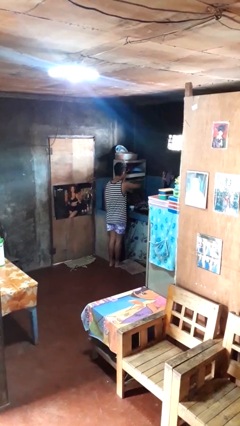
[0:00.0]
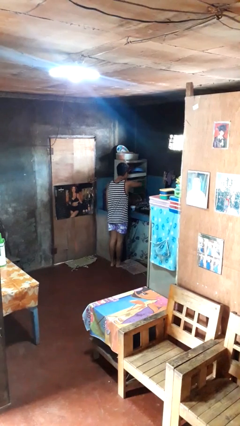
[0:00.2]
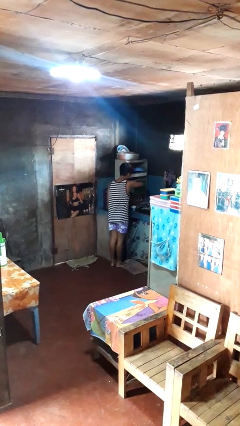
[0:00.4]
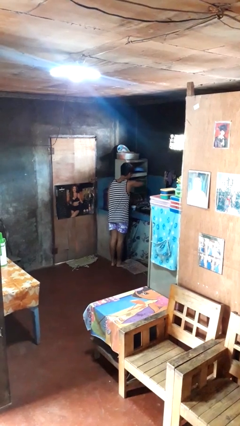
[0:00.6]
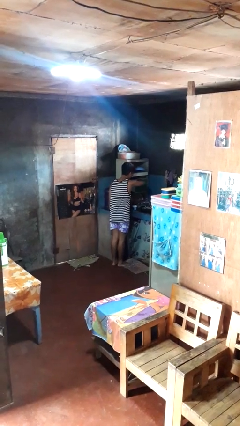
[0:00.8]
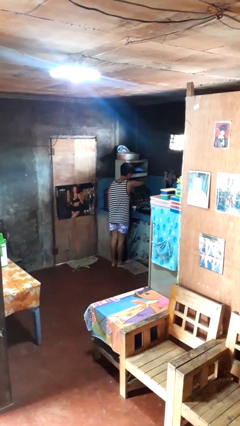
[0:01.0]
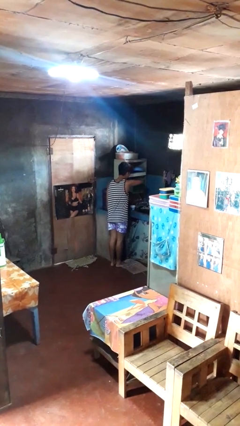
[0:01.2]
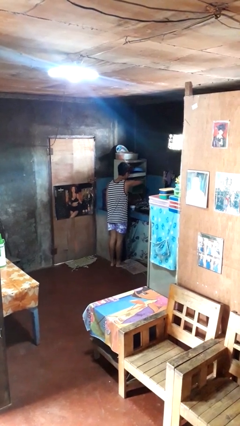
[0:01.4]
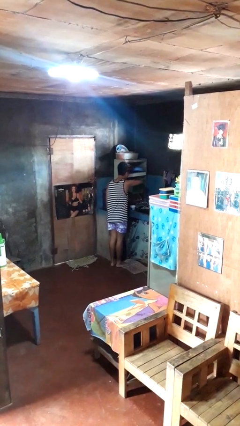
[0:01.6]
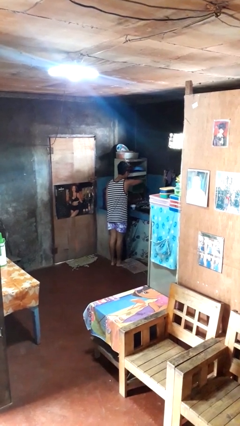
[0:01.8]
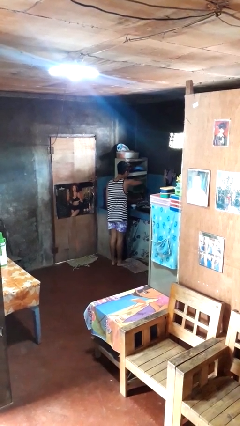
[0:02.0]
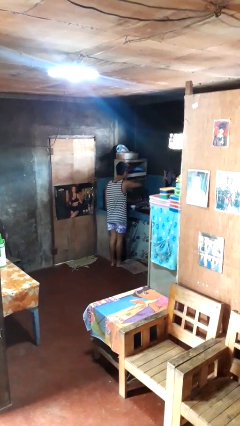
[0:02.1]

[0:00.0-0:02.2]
person searches in kitchen drawer

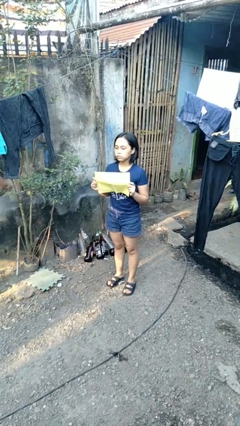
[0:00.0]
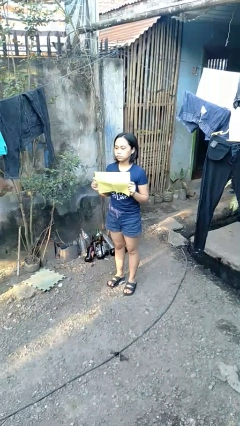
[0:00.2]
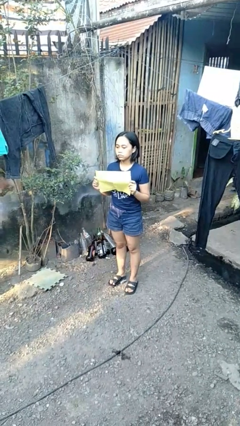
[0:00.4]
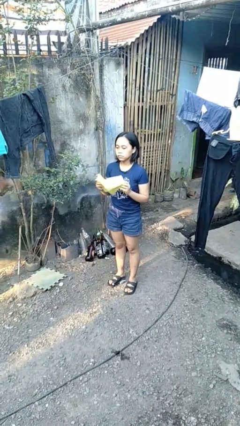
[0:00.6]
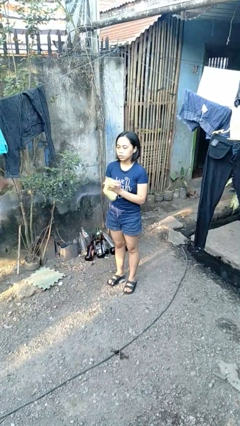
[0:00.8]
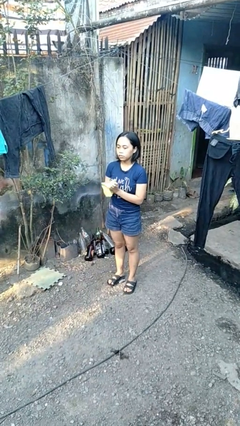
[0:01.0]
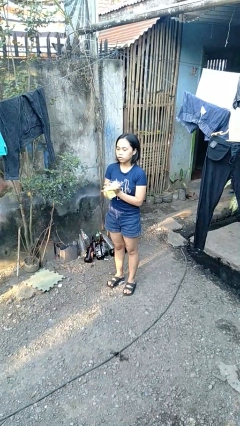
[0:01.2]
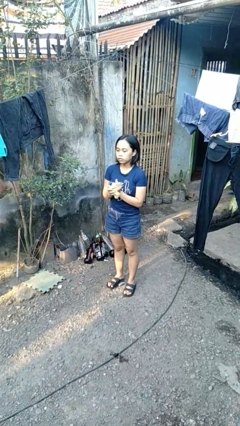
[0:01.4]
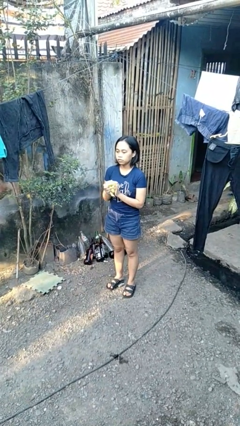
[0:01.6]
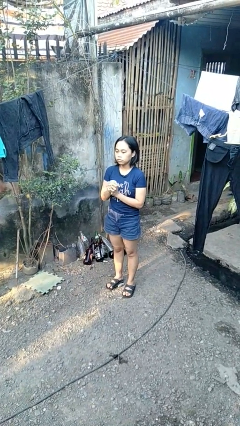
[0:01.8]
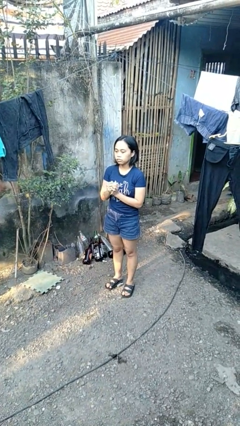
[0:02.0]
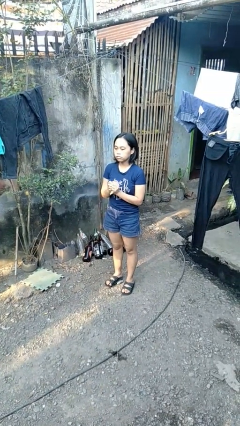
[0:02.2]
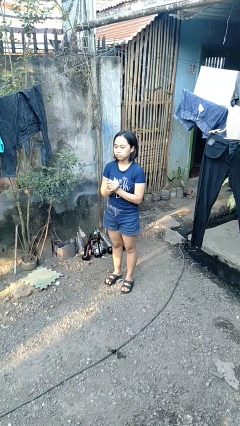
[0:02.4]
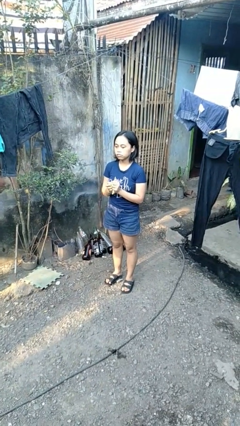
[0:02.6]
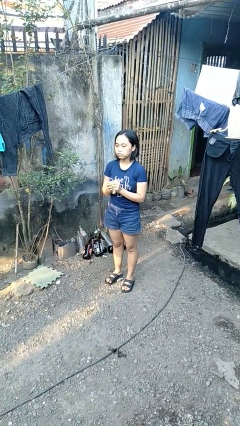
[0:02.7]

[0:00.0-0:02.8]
person crumples paper

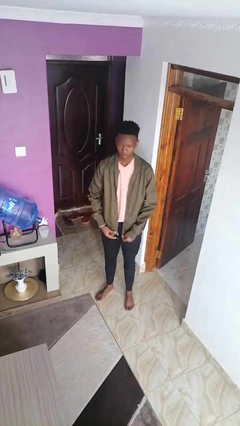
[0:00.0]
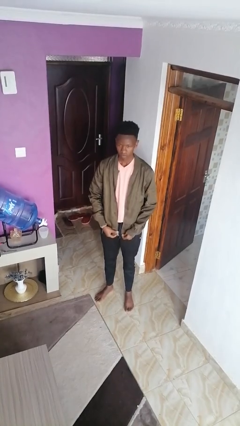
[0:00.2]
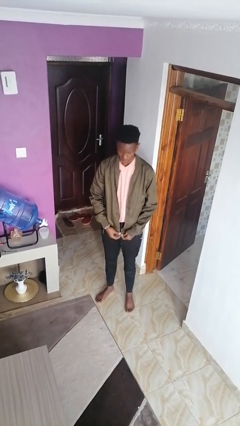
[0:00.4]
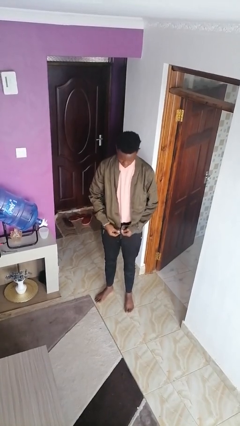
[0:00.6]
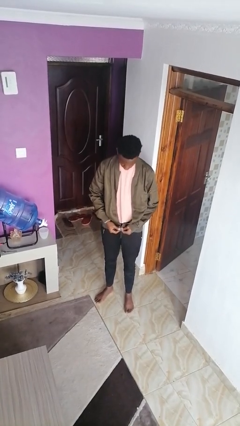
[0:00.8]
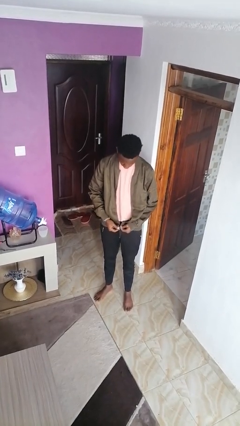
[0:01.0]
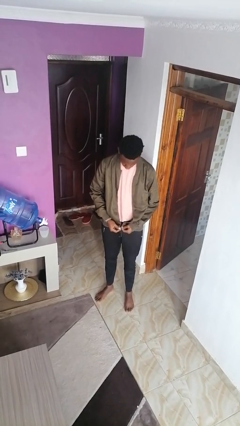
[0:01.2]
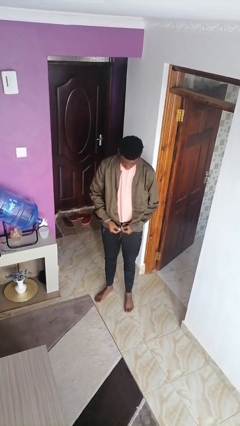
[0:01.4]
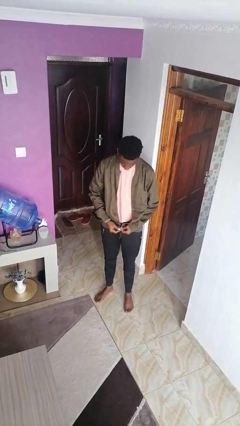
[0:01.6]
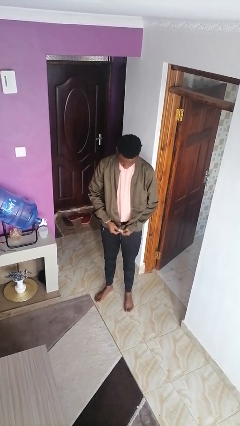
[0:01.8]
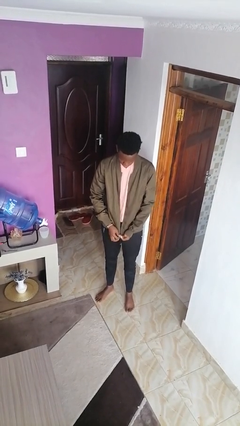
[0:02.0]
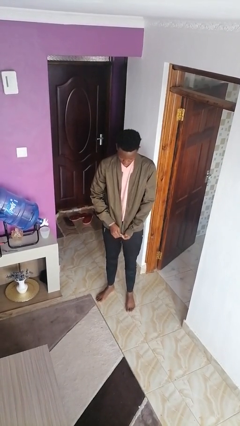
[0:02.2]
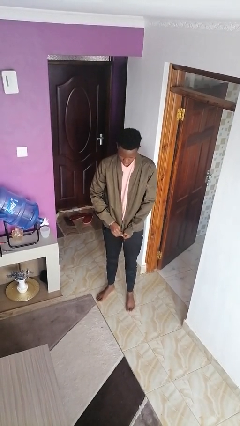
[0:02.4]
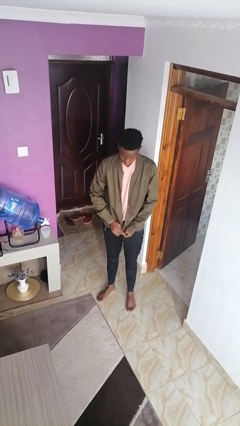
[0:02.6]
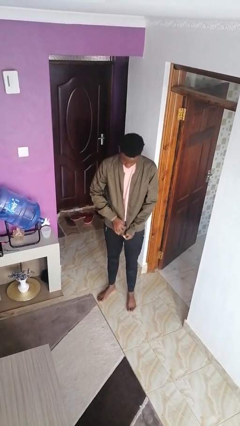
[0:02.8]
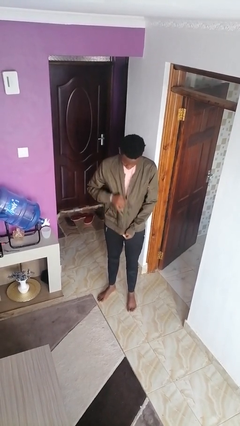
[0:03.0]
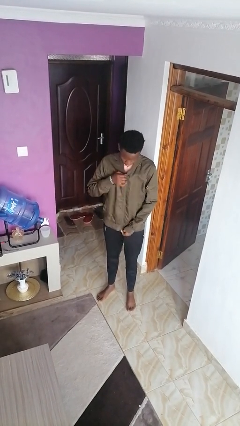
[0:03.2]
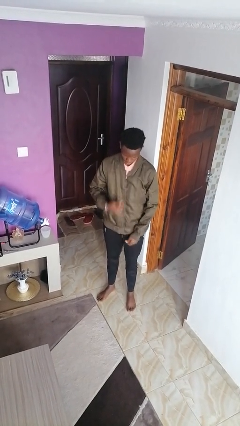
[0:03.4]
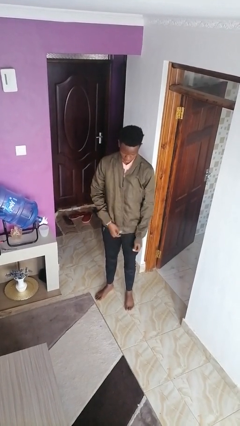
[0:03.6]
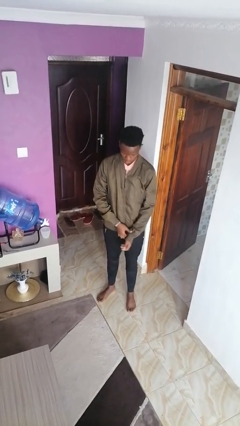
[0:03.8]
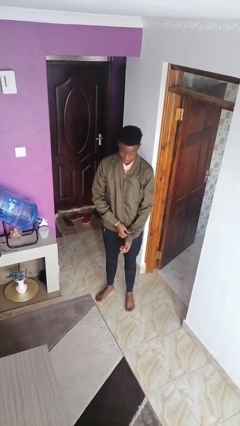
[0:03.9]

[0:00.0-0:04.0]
person zips up jacket

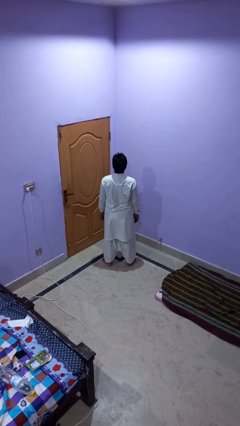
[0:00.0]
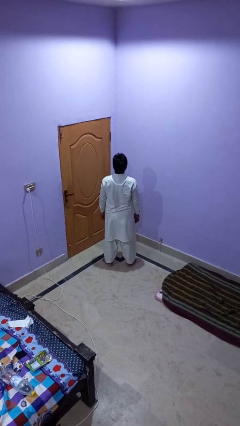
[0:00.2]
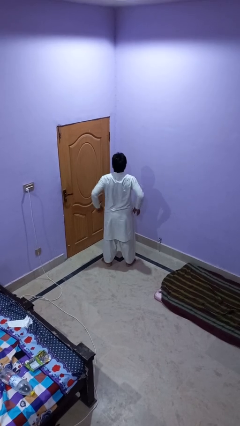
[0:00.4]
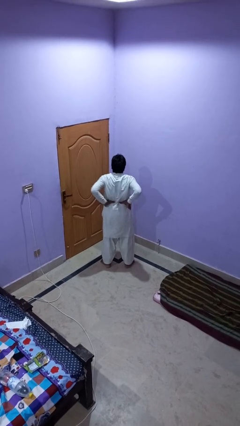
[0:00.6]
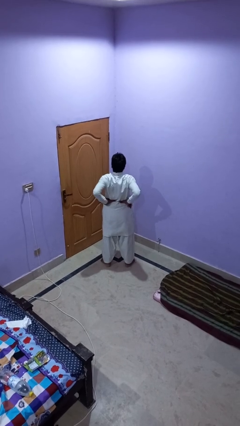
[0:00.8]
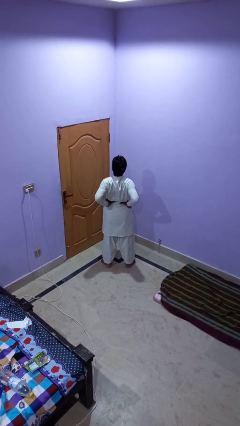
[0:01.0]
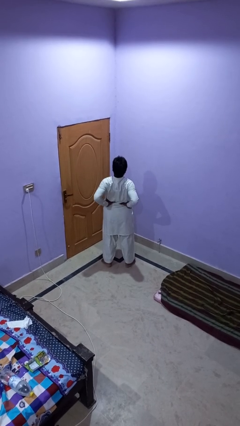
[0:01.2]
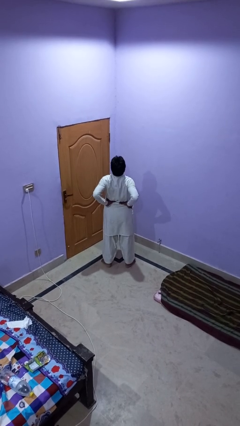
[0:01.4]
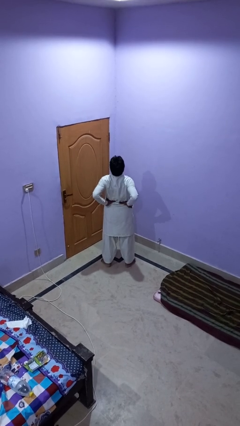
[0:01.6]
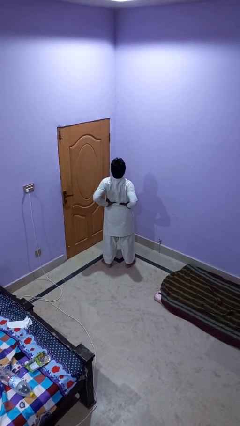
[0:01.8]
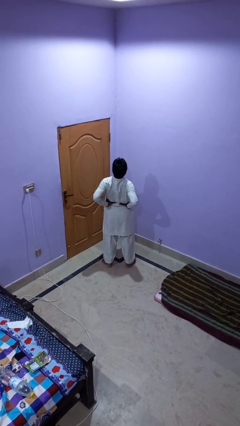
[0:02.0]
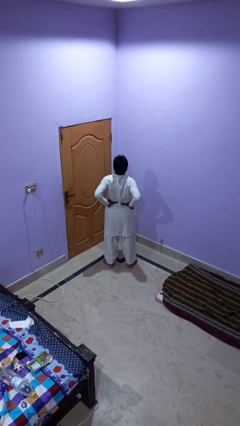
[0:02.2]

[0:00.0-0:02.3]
person stretches back

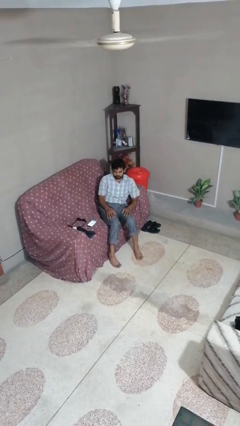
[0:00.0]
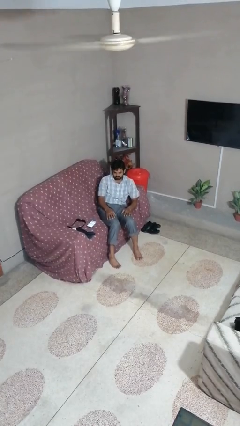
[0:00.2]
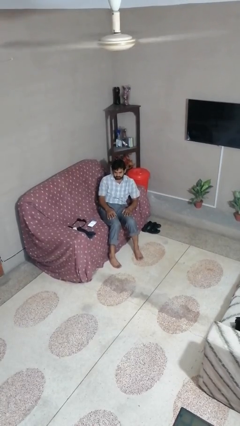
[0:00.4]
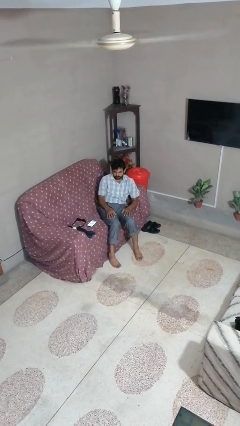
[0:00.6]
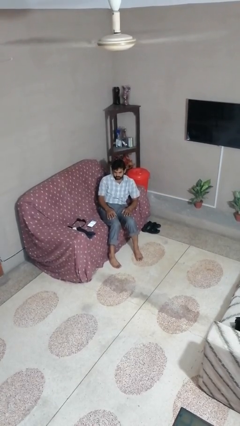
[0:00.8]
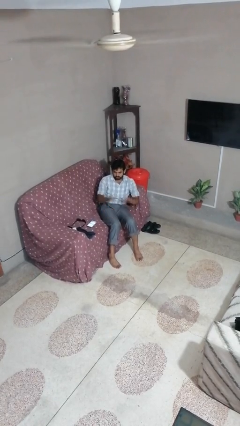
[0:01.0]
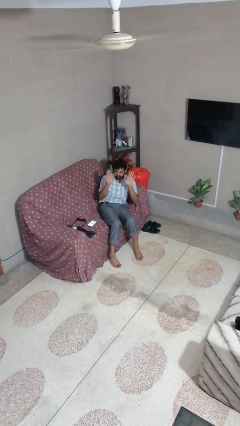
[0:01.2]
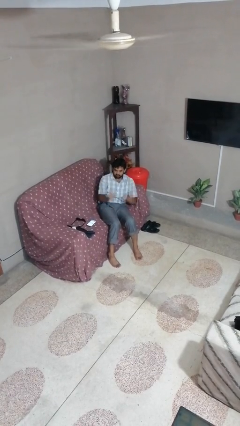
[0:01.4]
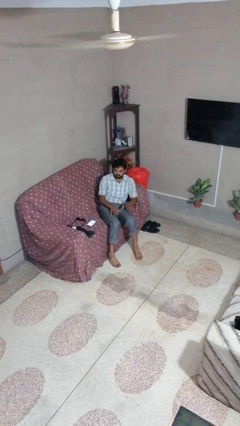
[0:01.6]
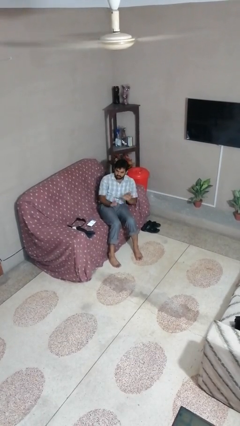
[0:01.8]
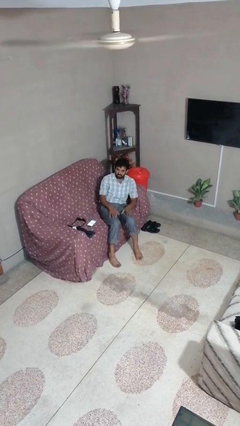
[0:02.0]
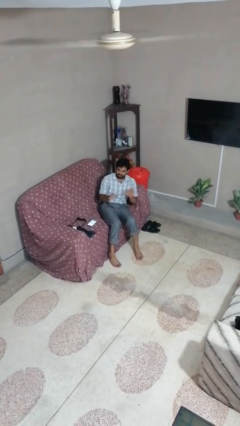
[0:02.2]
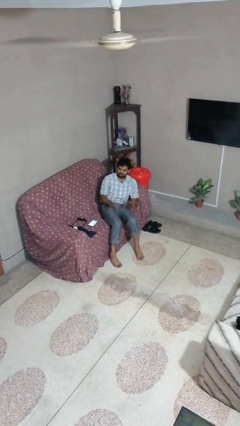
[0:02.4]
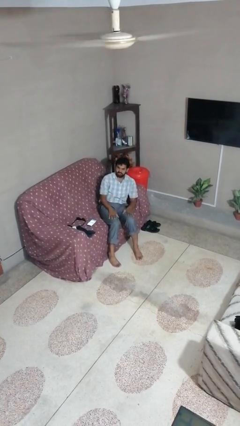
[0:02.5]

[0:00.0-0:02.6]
person slaps hands on thighs

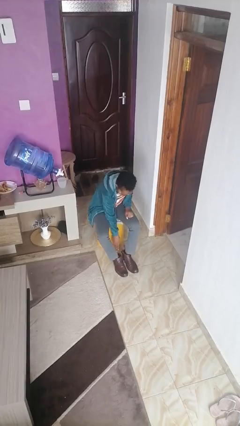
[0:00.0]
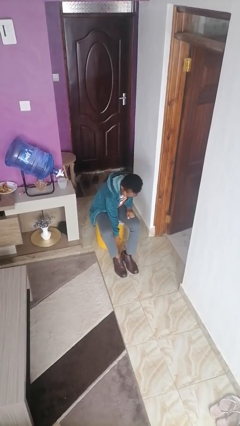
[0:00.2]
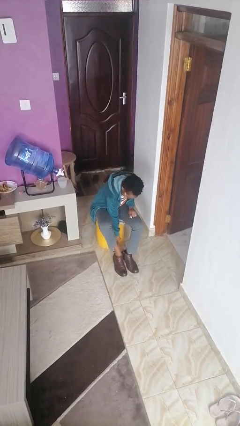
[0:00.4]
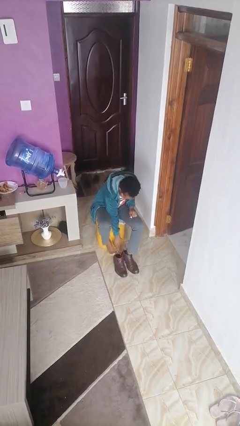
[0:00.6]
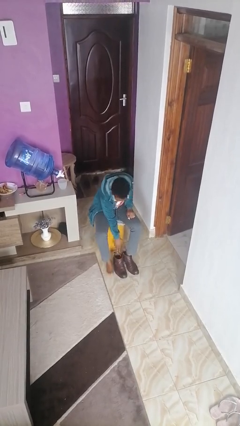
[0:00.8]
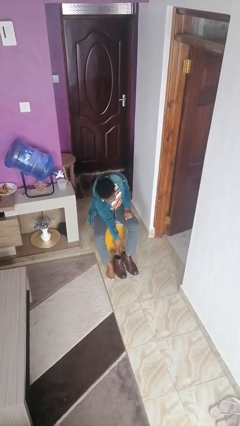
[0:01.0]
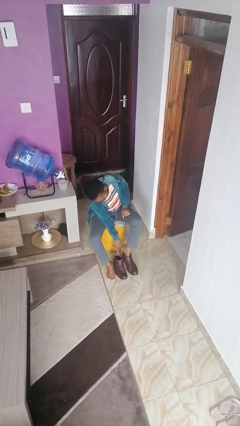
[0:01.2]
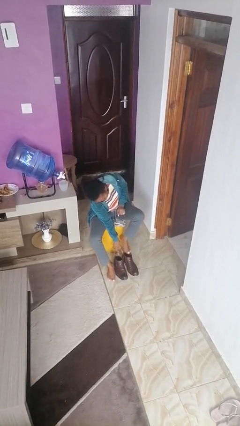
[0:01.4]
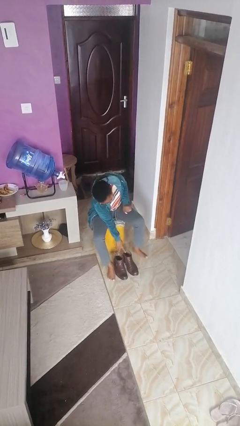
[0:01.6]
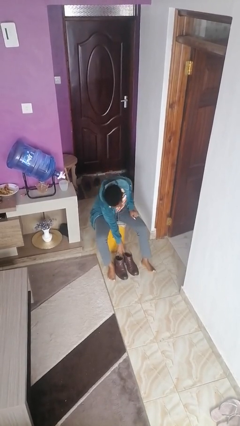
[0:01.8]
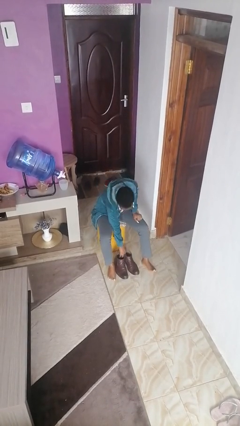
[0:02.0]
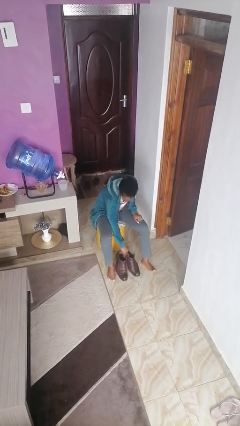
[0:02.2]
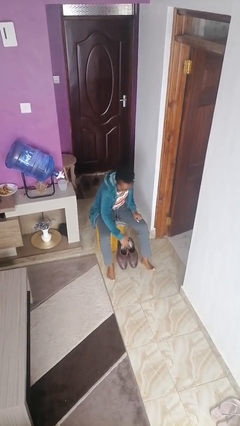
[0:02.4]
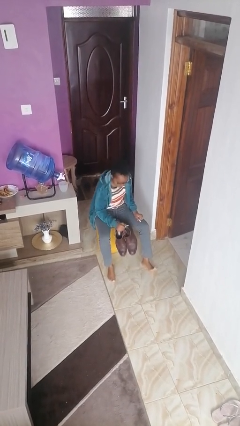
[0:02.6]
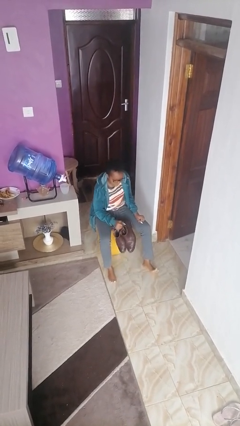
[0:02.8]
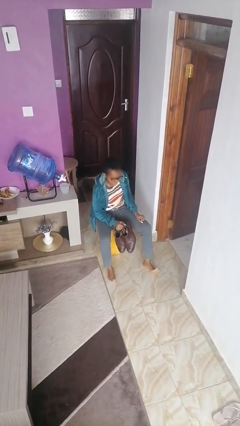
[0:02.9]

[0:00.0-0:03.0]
person takes off boots

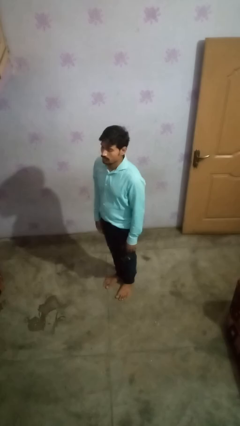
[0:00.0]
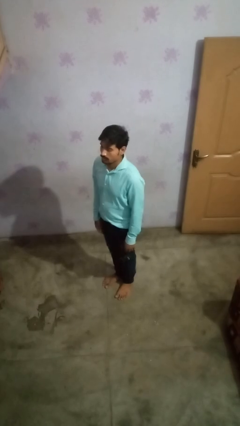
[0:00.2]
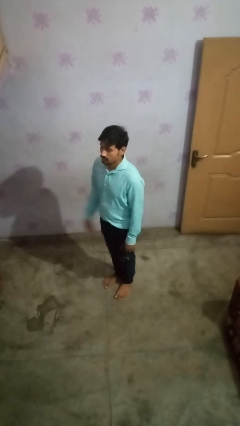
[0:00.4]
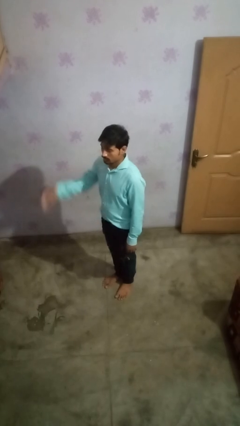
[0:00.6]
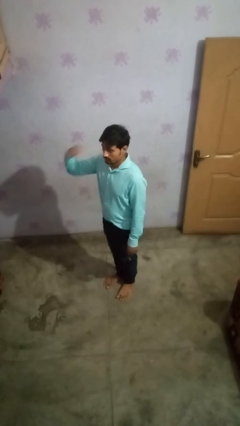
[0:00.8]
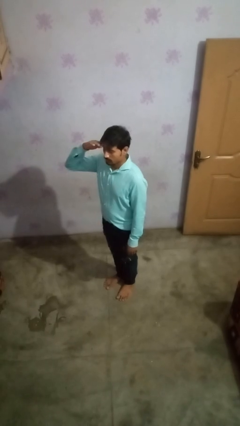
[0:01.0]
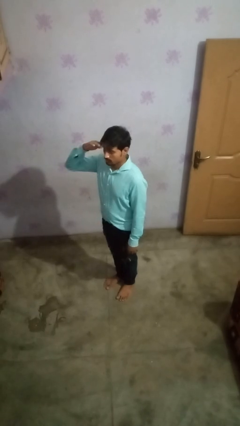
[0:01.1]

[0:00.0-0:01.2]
person salutes
